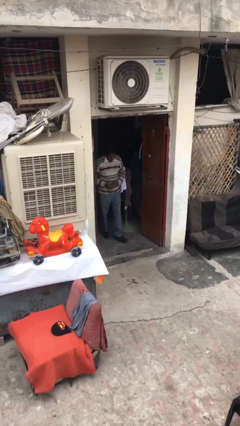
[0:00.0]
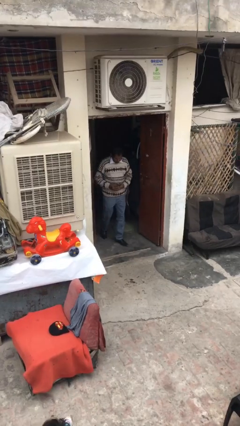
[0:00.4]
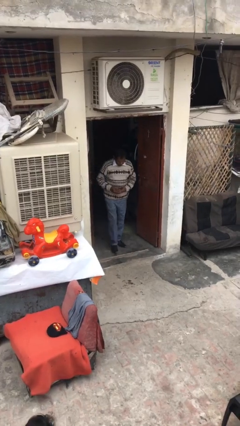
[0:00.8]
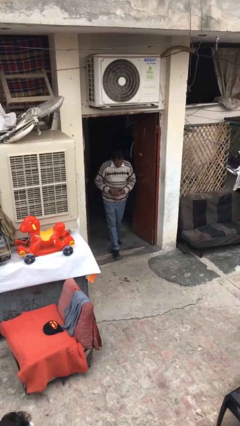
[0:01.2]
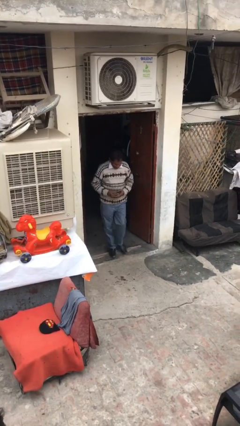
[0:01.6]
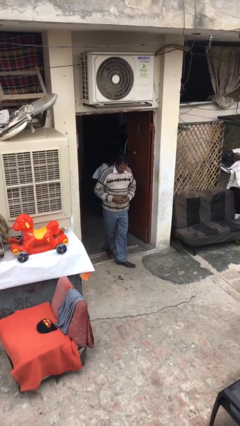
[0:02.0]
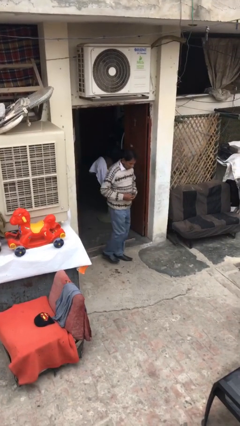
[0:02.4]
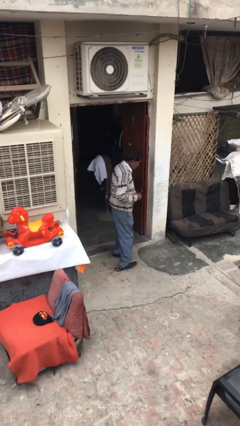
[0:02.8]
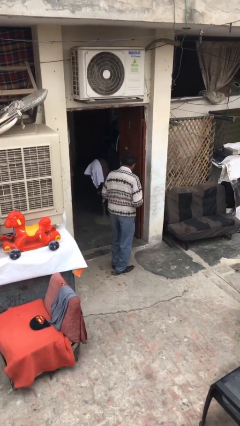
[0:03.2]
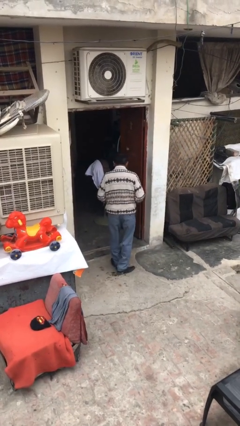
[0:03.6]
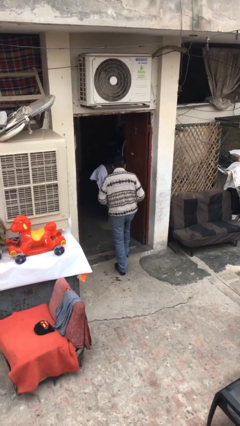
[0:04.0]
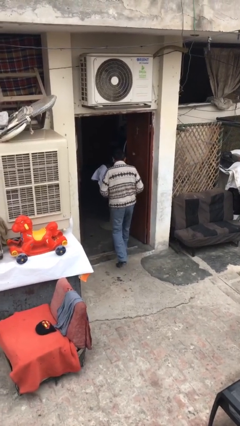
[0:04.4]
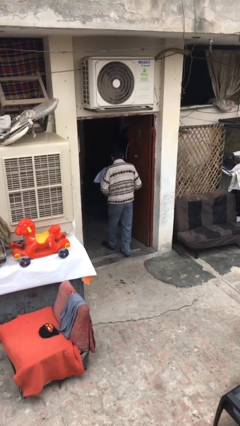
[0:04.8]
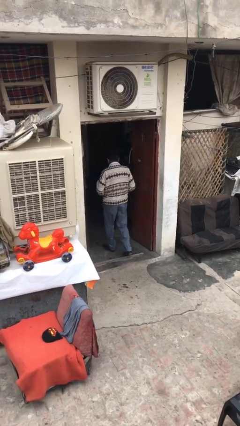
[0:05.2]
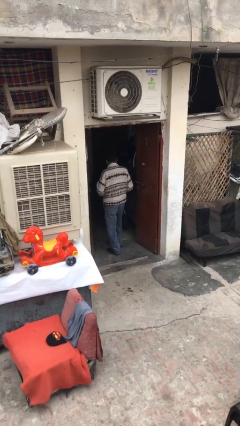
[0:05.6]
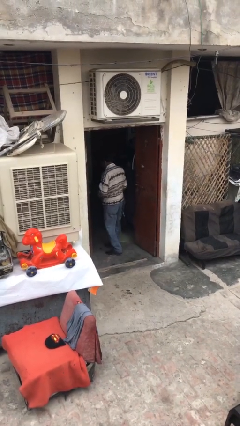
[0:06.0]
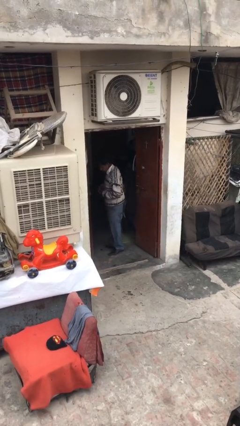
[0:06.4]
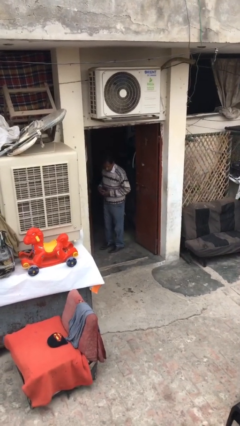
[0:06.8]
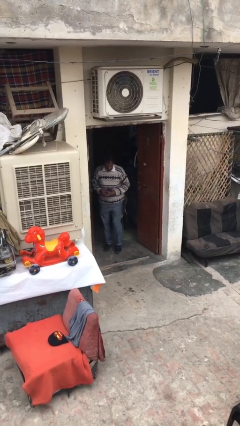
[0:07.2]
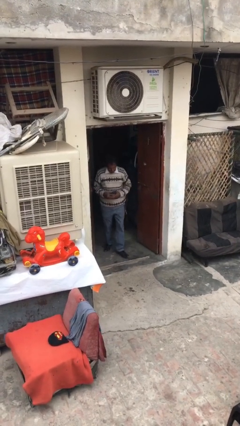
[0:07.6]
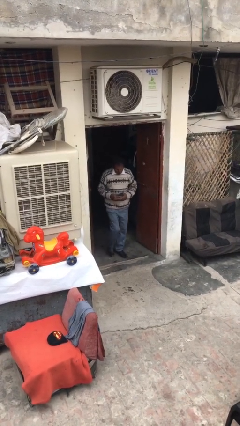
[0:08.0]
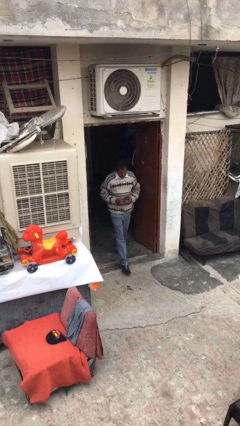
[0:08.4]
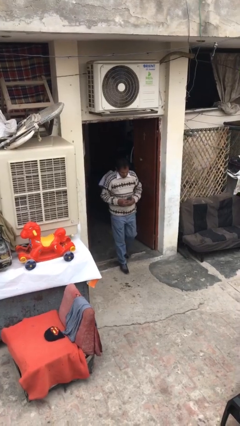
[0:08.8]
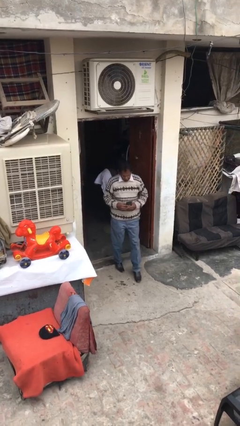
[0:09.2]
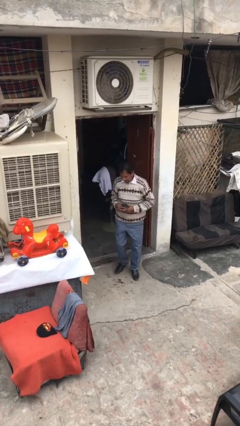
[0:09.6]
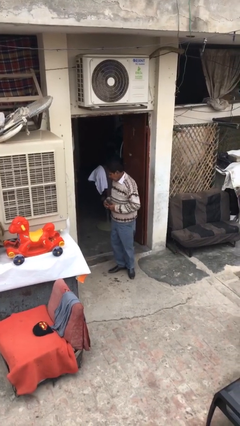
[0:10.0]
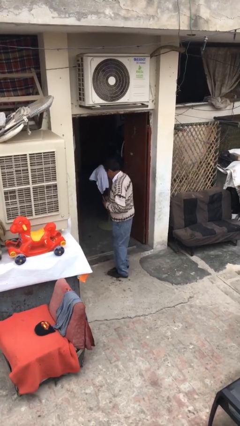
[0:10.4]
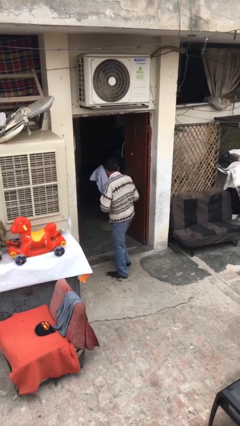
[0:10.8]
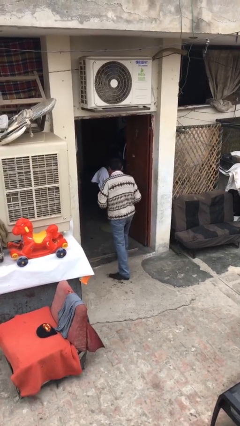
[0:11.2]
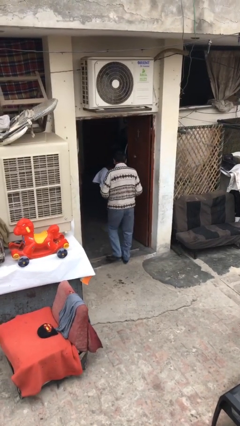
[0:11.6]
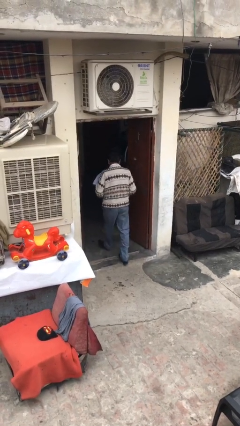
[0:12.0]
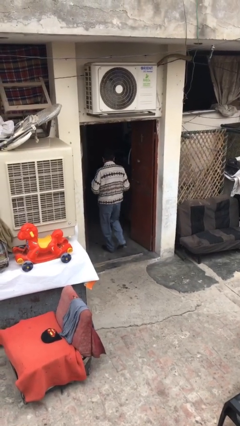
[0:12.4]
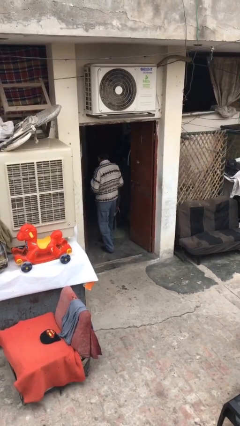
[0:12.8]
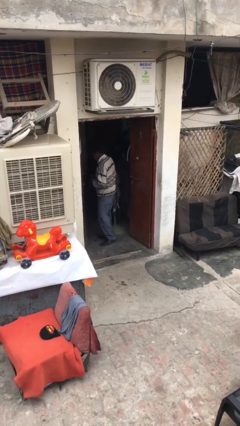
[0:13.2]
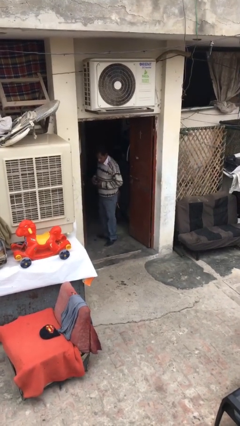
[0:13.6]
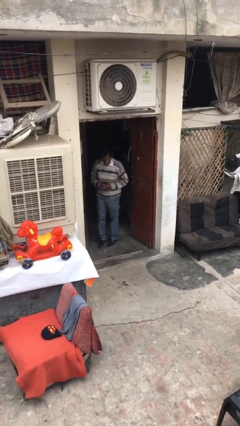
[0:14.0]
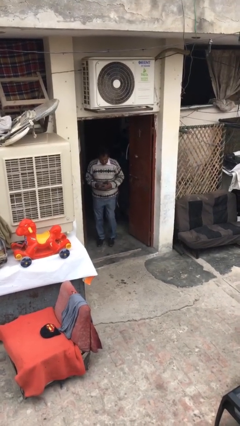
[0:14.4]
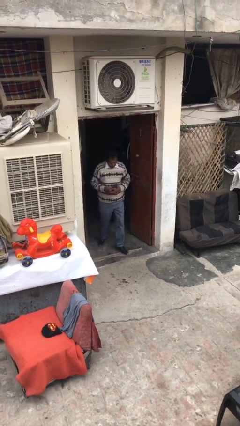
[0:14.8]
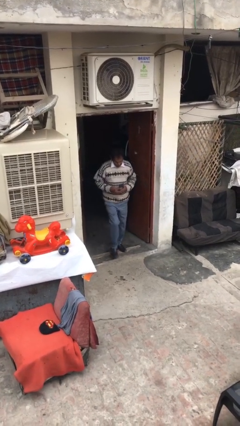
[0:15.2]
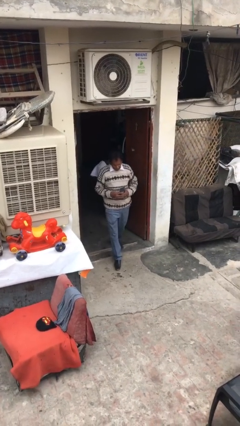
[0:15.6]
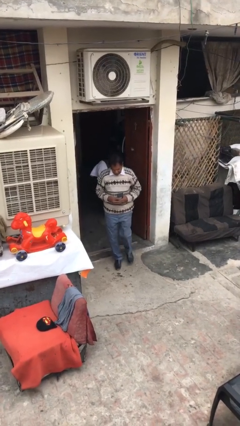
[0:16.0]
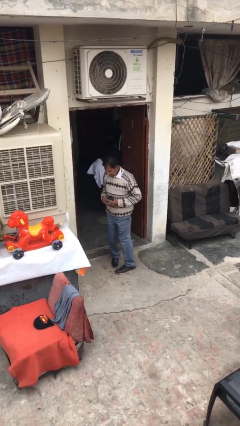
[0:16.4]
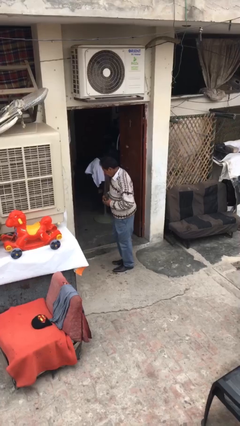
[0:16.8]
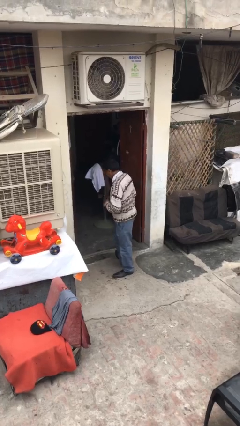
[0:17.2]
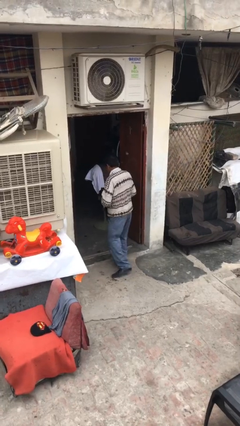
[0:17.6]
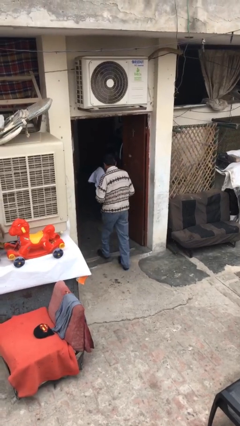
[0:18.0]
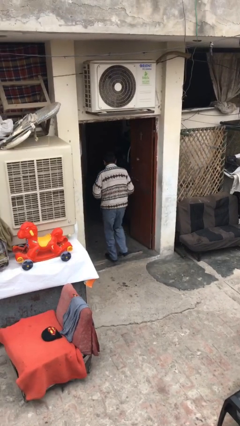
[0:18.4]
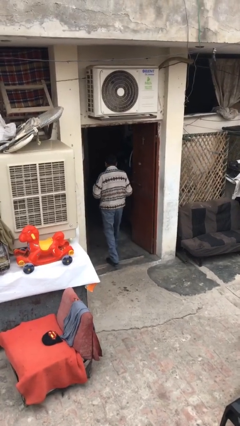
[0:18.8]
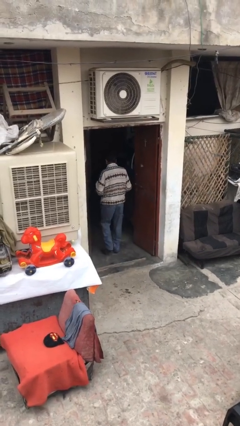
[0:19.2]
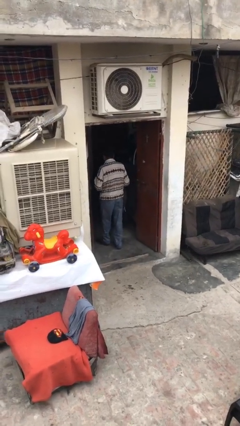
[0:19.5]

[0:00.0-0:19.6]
person texts on phone

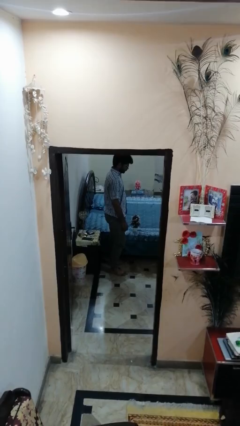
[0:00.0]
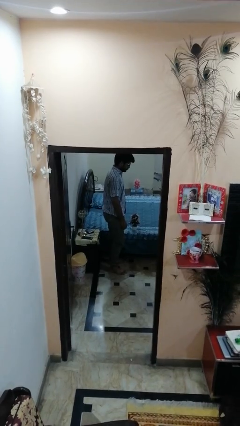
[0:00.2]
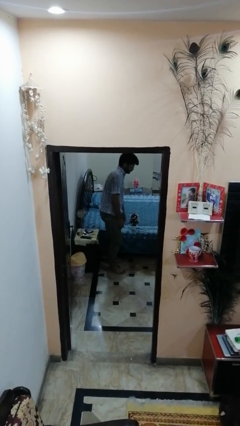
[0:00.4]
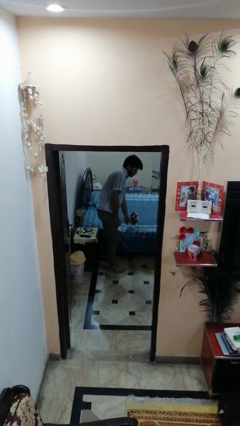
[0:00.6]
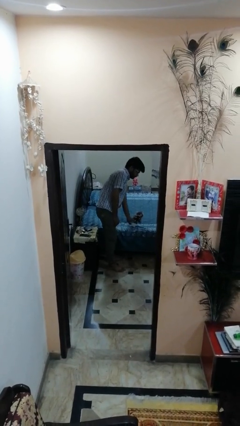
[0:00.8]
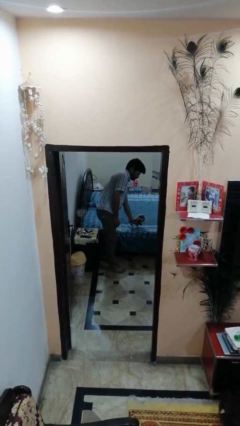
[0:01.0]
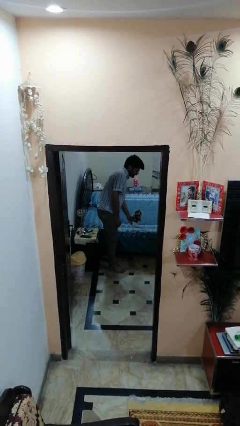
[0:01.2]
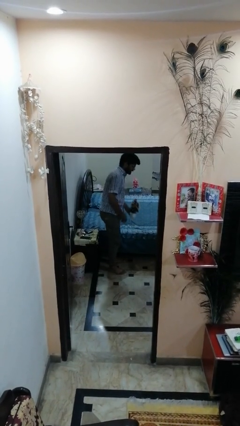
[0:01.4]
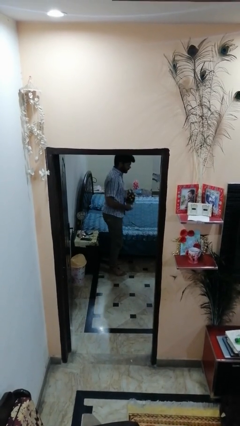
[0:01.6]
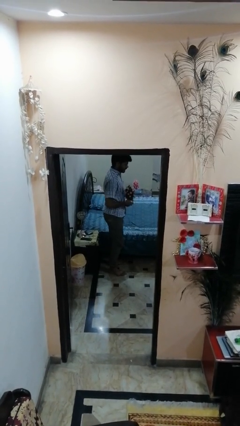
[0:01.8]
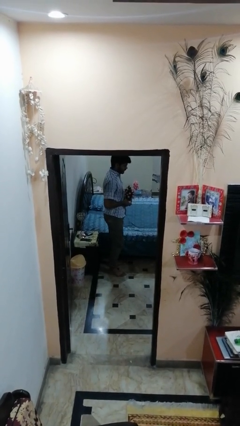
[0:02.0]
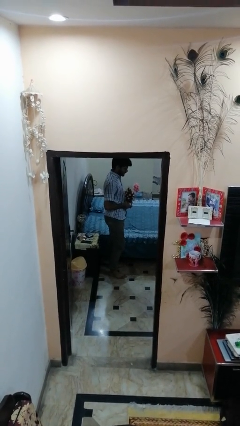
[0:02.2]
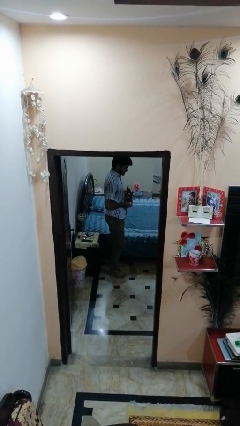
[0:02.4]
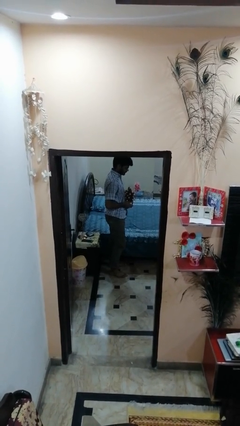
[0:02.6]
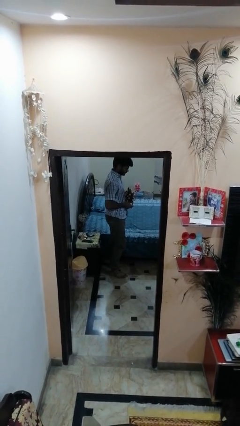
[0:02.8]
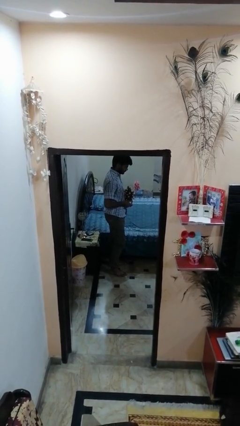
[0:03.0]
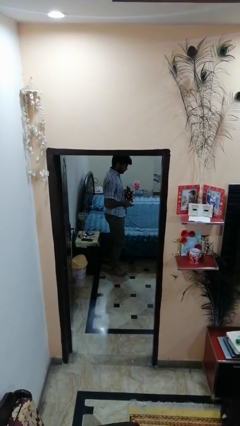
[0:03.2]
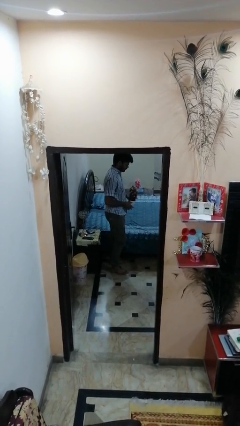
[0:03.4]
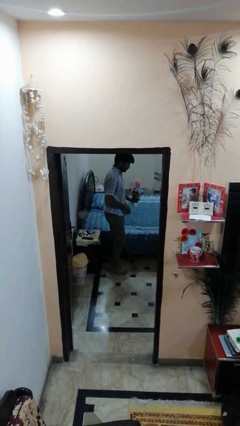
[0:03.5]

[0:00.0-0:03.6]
person picks up object from bed

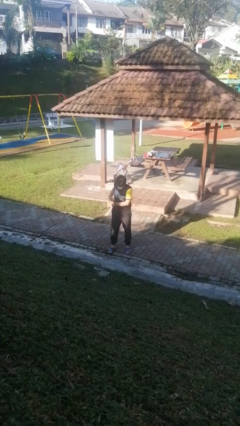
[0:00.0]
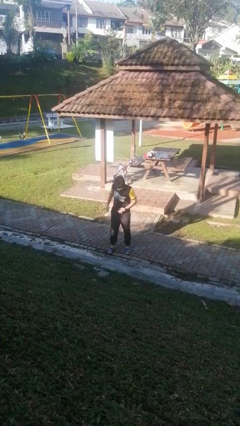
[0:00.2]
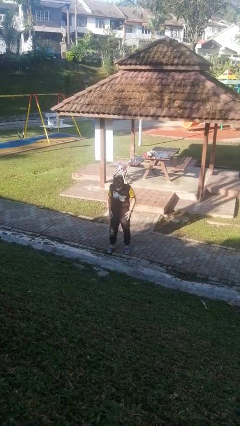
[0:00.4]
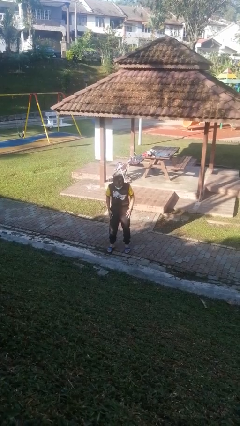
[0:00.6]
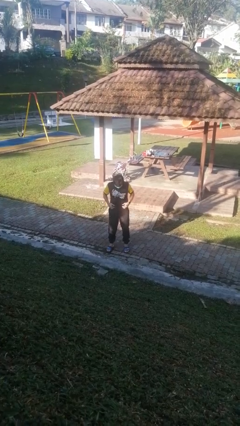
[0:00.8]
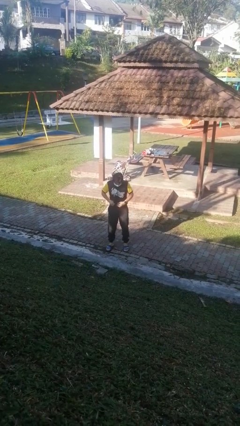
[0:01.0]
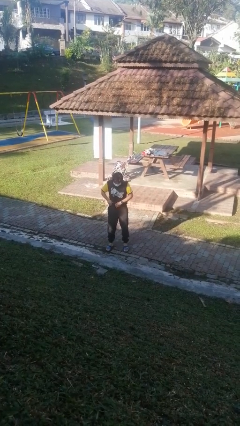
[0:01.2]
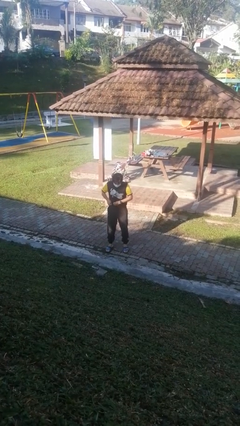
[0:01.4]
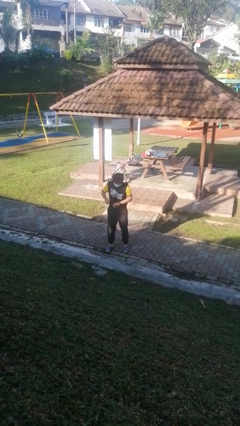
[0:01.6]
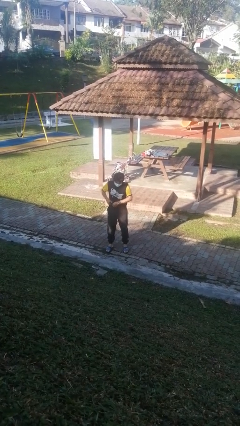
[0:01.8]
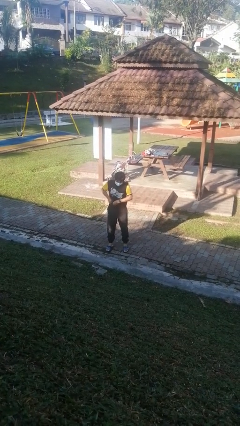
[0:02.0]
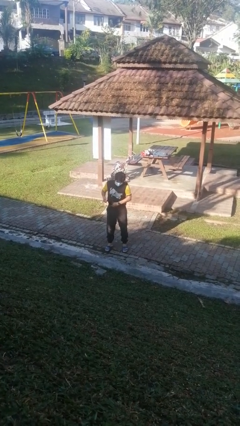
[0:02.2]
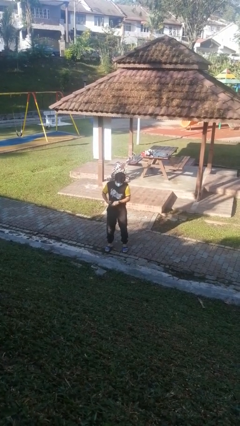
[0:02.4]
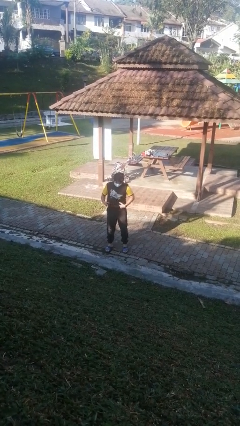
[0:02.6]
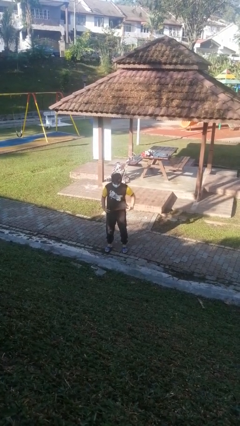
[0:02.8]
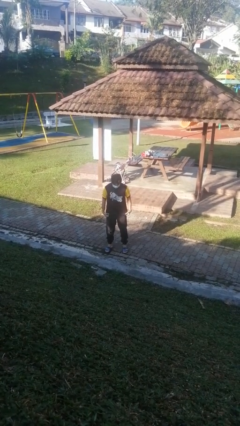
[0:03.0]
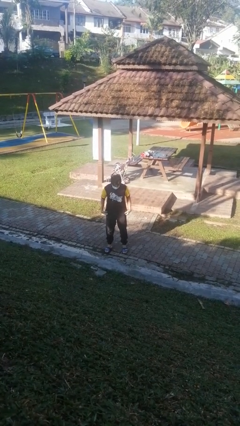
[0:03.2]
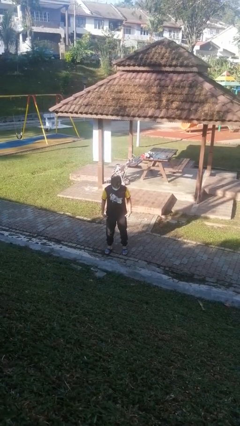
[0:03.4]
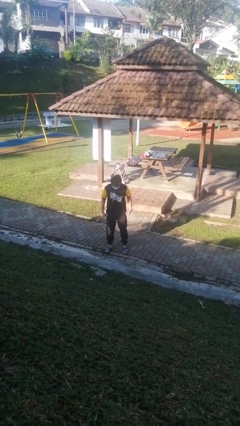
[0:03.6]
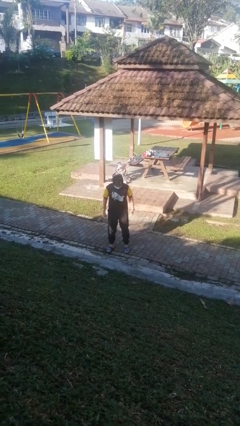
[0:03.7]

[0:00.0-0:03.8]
person untucks shirt

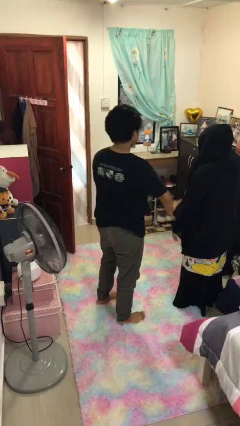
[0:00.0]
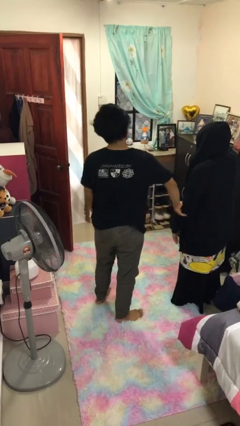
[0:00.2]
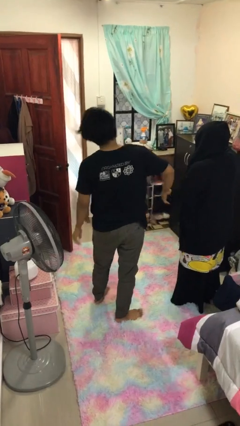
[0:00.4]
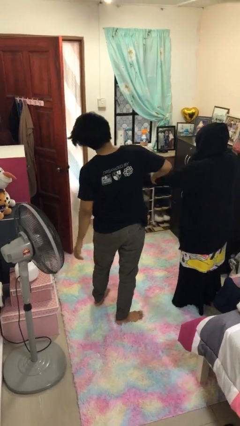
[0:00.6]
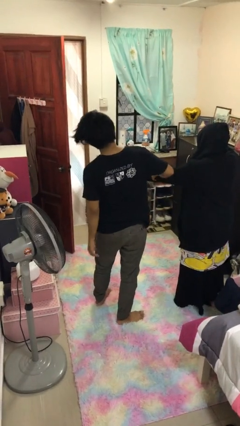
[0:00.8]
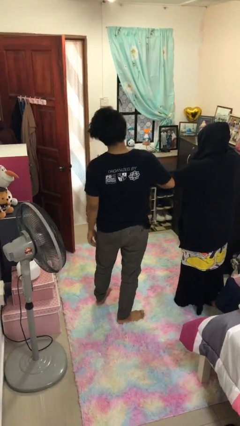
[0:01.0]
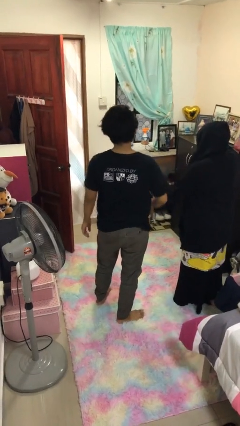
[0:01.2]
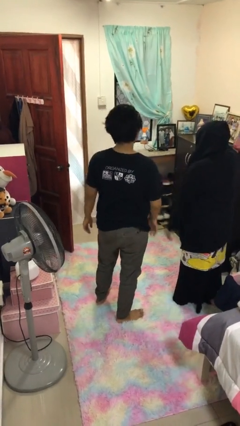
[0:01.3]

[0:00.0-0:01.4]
person grabs person by forearm
